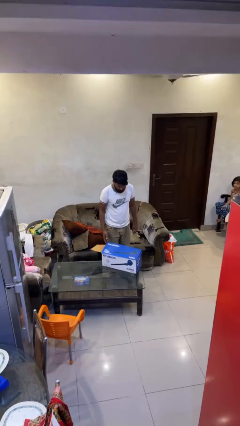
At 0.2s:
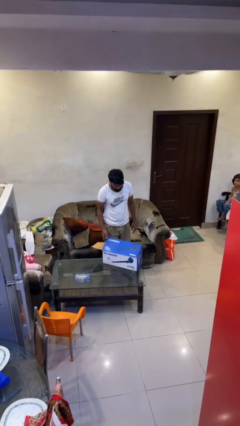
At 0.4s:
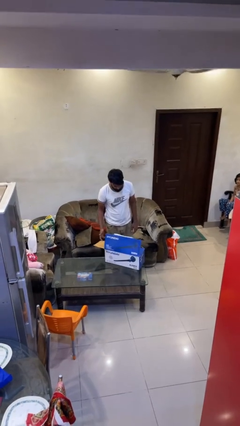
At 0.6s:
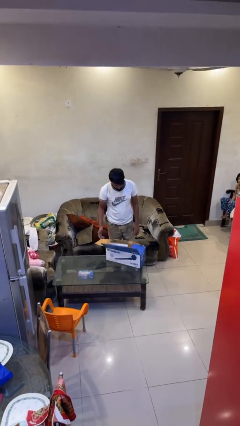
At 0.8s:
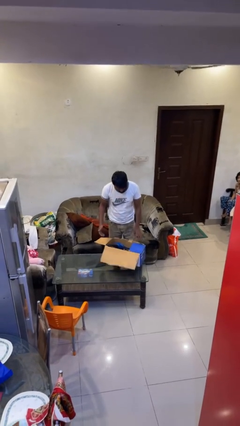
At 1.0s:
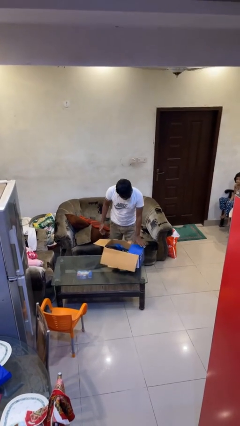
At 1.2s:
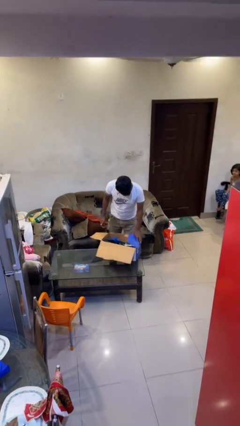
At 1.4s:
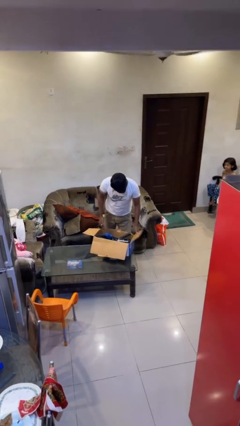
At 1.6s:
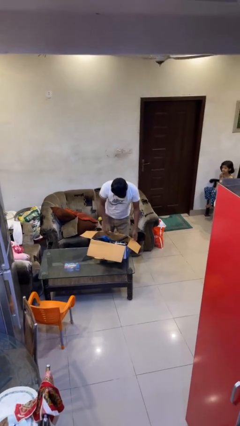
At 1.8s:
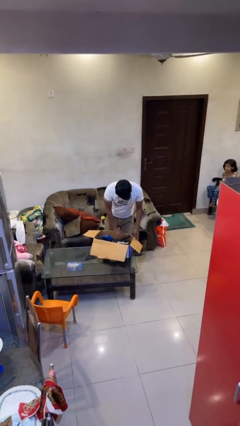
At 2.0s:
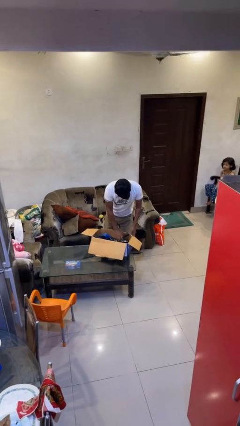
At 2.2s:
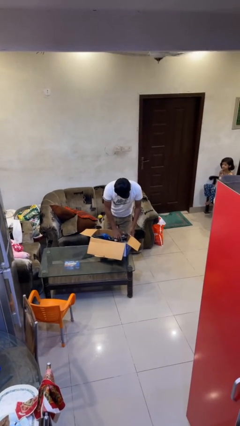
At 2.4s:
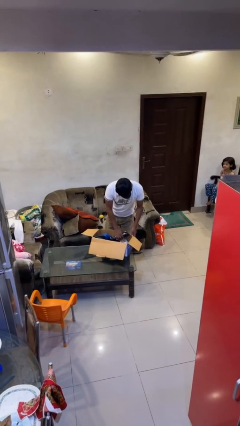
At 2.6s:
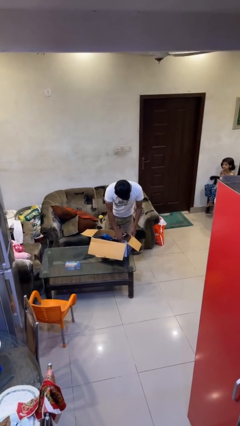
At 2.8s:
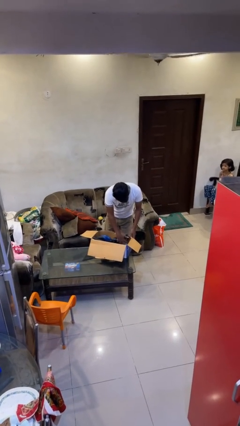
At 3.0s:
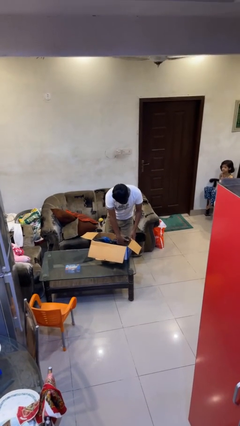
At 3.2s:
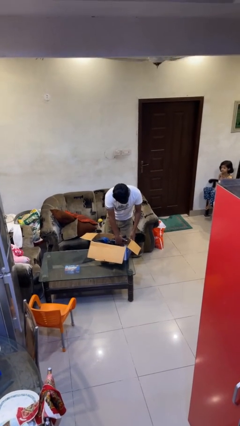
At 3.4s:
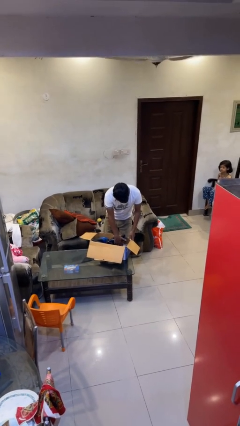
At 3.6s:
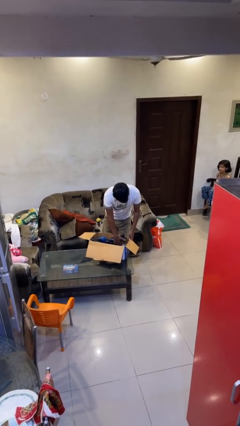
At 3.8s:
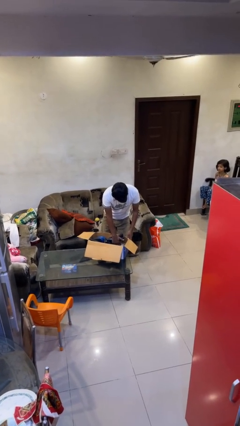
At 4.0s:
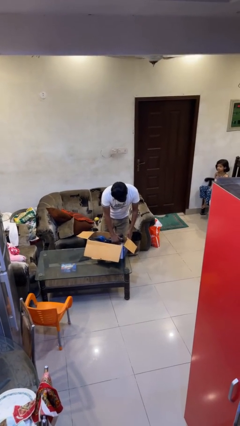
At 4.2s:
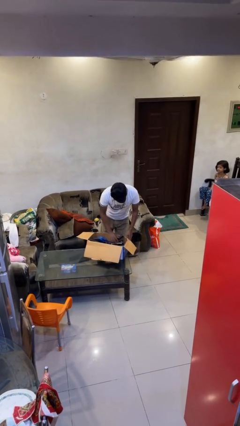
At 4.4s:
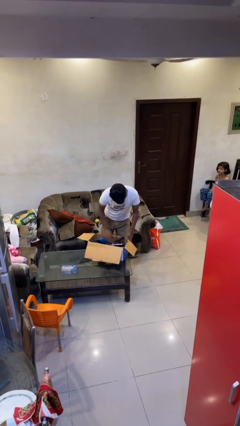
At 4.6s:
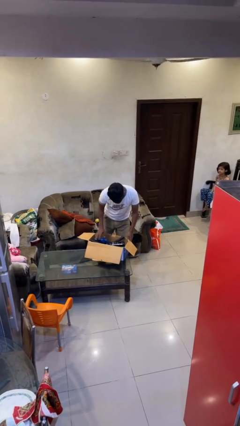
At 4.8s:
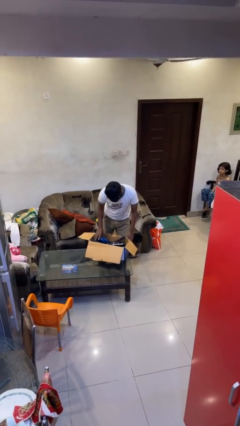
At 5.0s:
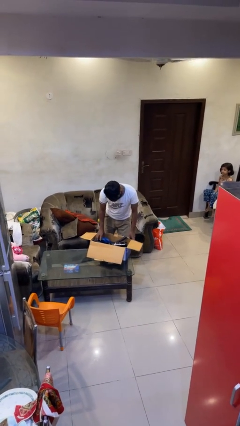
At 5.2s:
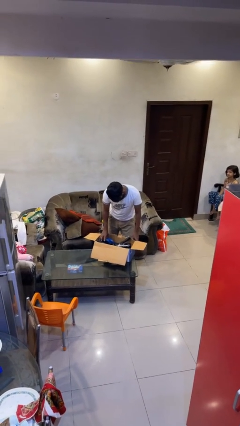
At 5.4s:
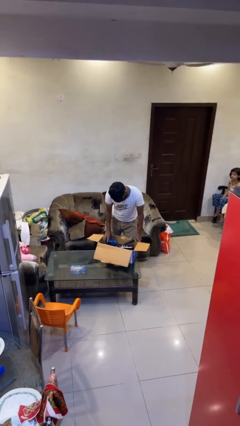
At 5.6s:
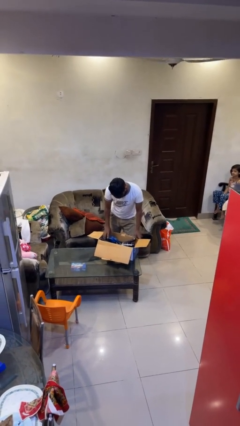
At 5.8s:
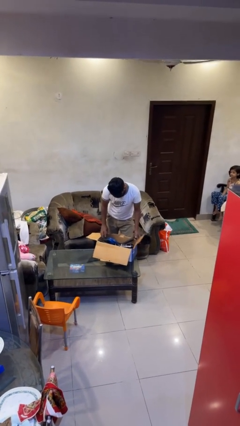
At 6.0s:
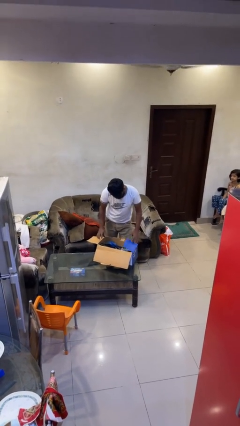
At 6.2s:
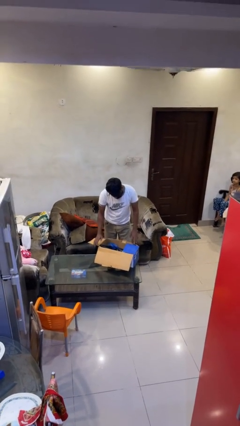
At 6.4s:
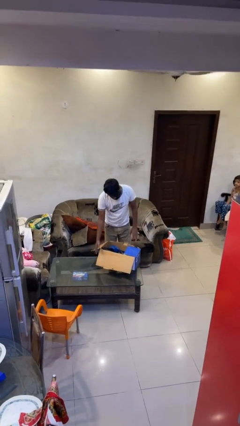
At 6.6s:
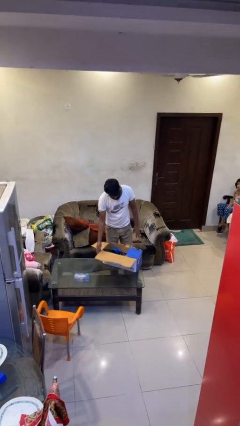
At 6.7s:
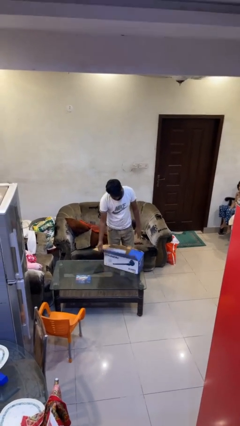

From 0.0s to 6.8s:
person searches in box

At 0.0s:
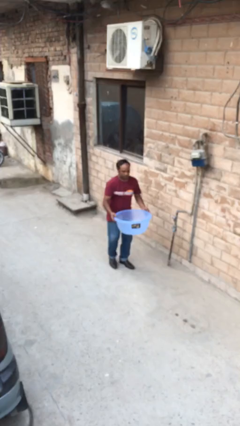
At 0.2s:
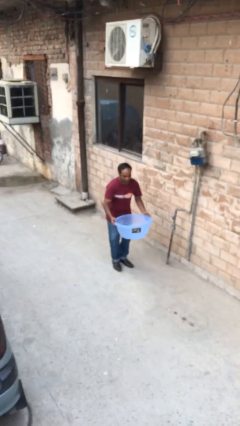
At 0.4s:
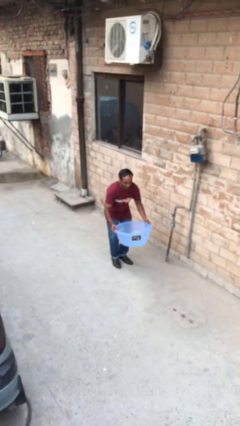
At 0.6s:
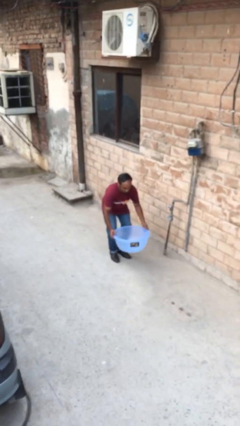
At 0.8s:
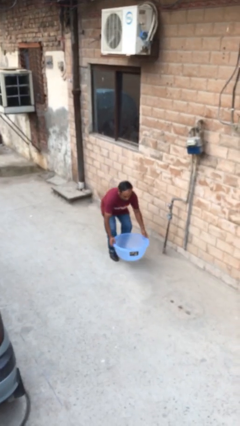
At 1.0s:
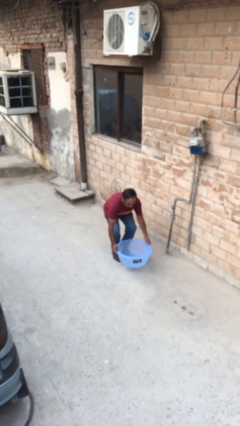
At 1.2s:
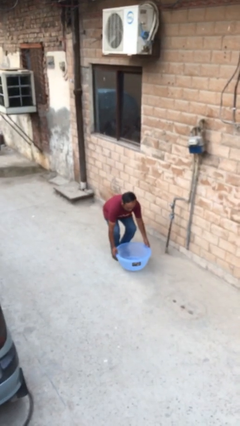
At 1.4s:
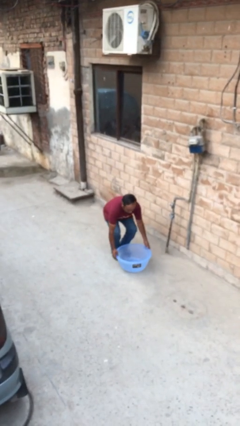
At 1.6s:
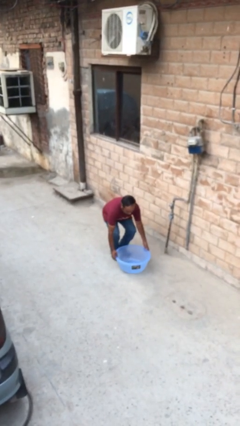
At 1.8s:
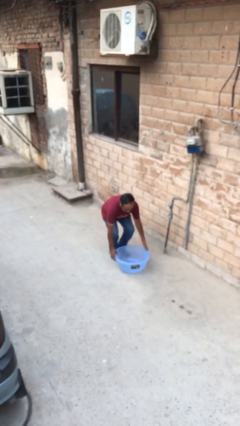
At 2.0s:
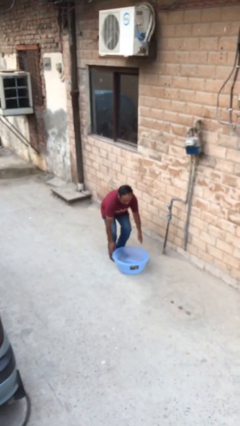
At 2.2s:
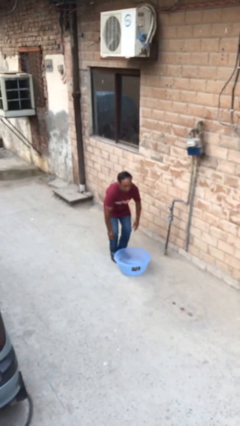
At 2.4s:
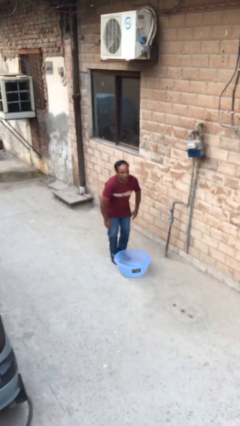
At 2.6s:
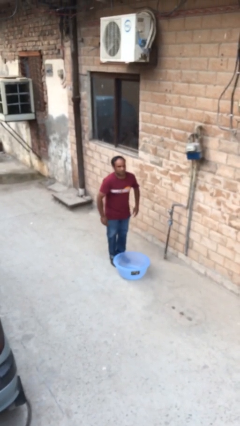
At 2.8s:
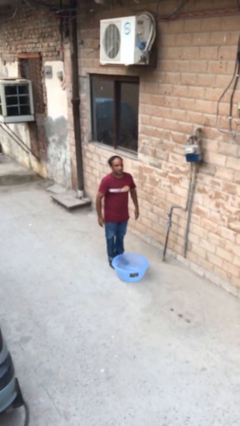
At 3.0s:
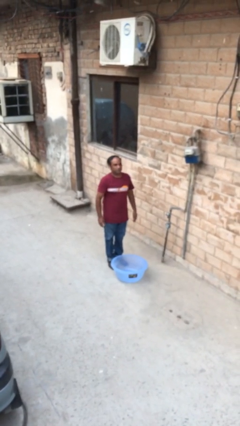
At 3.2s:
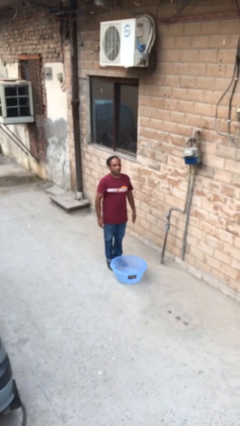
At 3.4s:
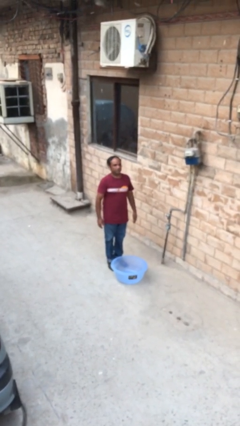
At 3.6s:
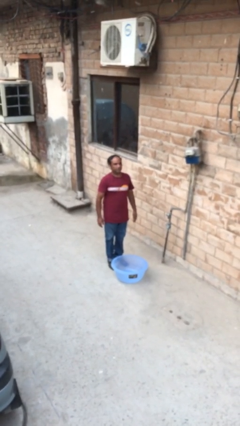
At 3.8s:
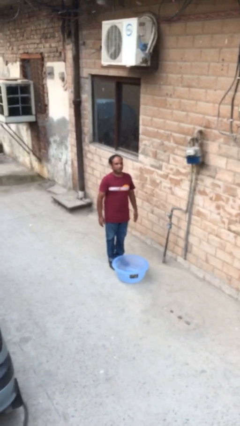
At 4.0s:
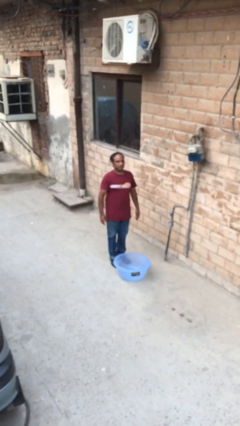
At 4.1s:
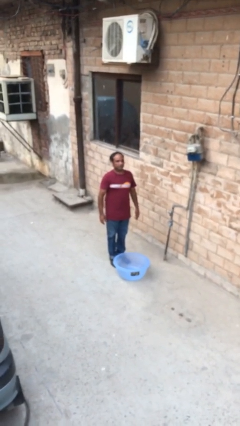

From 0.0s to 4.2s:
person puts down object on floor

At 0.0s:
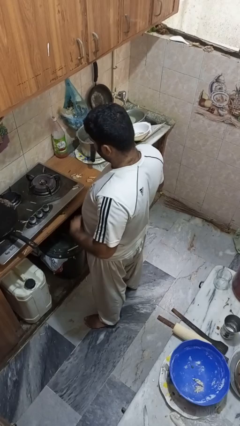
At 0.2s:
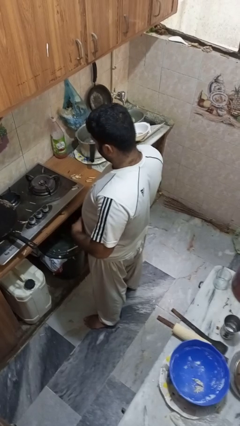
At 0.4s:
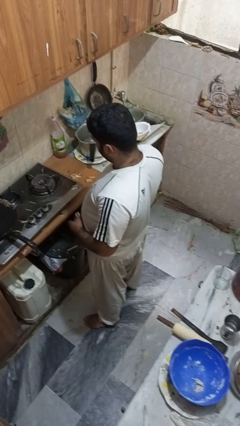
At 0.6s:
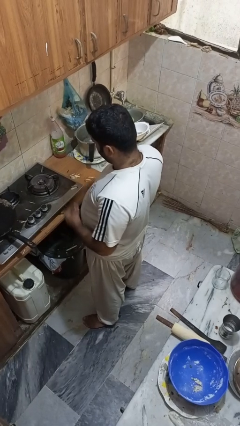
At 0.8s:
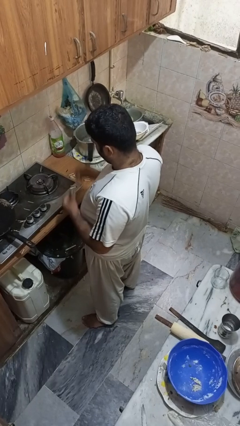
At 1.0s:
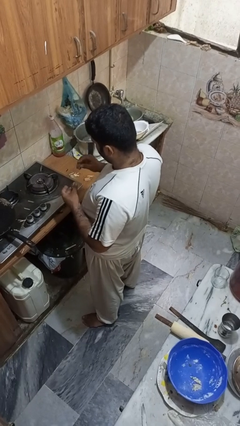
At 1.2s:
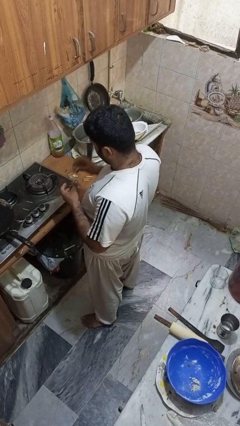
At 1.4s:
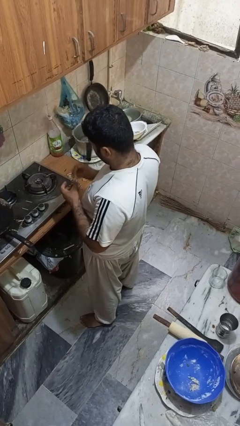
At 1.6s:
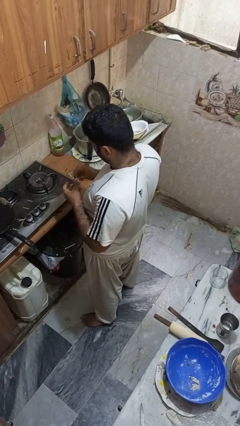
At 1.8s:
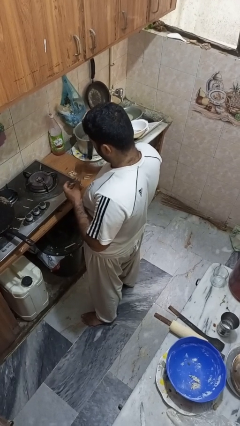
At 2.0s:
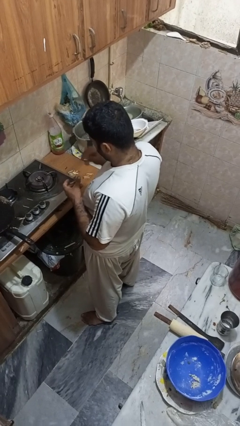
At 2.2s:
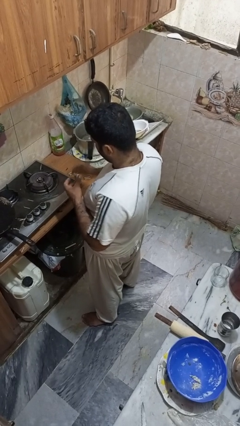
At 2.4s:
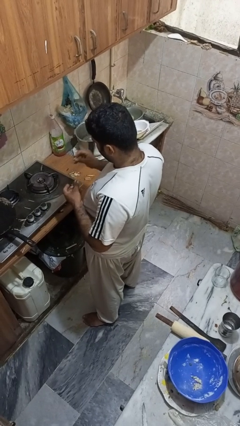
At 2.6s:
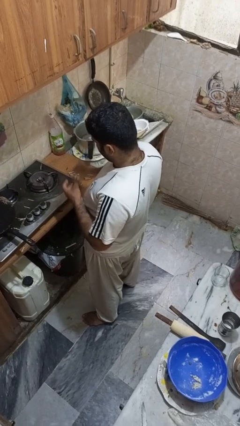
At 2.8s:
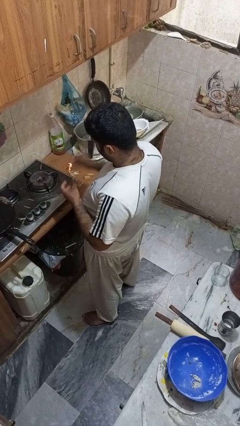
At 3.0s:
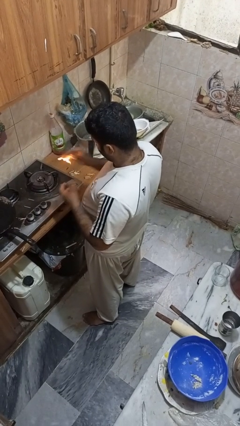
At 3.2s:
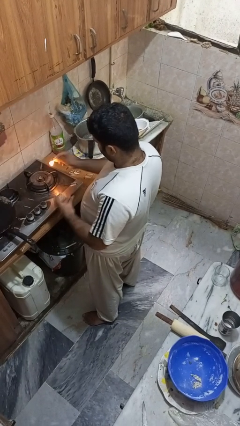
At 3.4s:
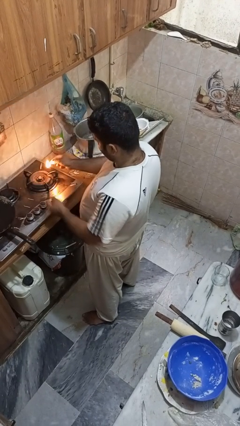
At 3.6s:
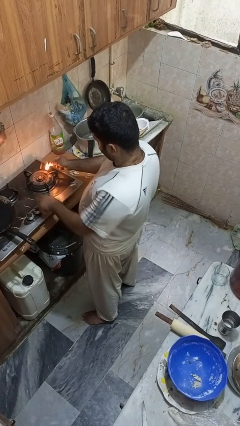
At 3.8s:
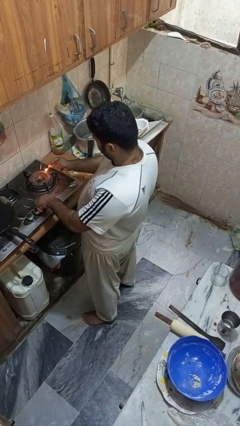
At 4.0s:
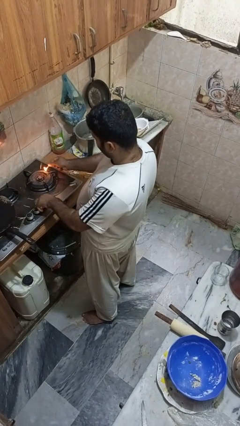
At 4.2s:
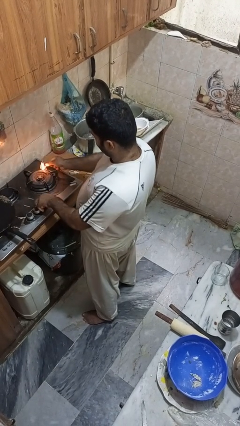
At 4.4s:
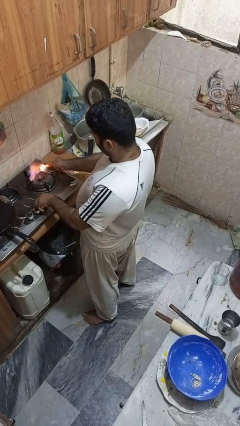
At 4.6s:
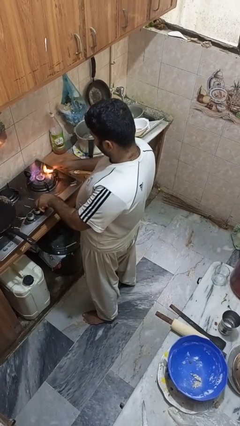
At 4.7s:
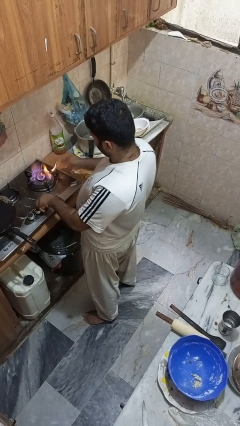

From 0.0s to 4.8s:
person turns on stovetop

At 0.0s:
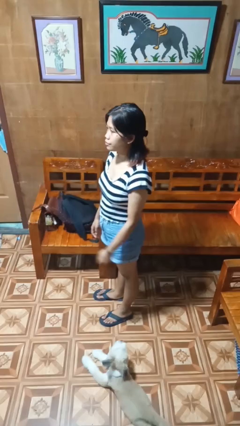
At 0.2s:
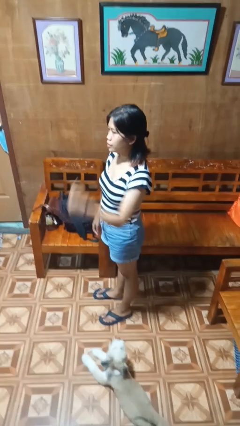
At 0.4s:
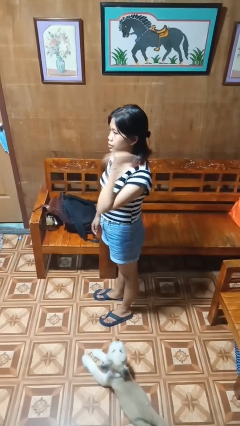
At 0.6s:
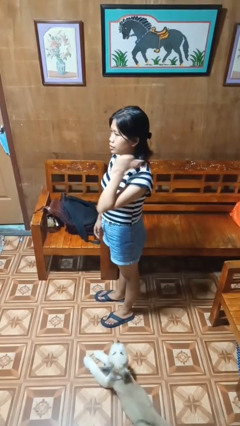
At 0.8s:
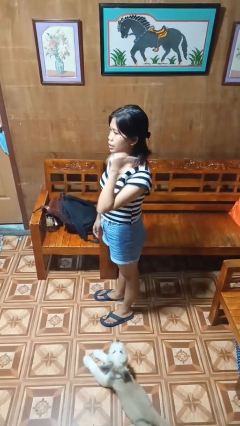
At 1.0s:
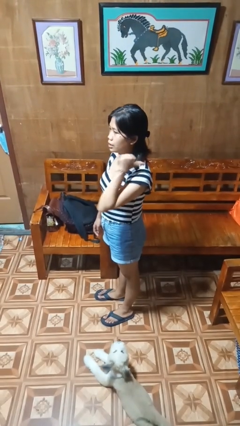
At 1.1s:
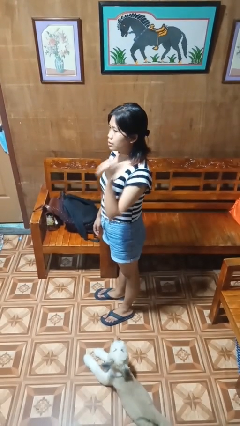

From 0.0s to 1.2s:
person gestures behind me

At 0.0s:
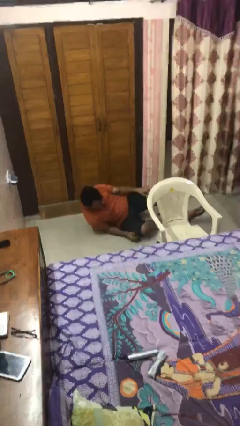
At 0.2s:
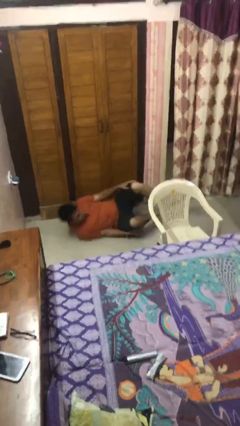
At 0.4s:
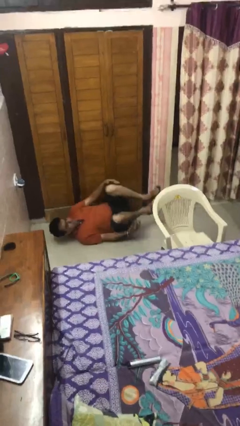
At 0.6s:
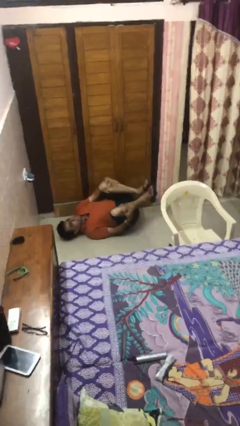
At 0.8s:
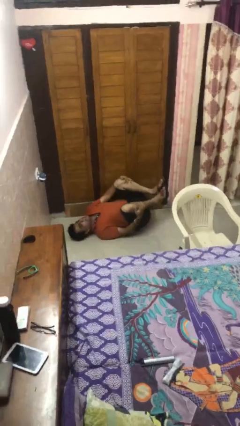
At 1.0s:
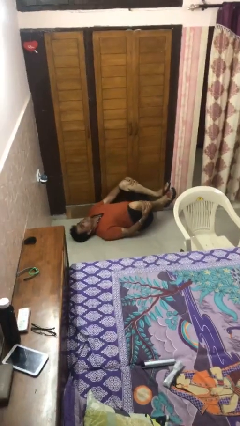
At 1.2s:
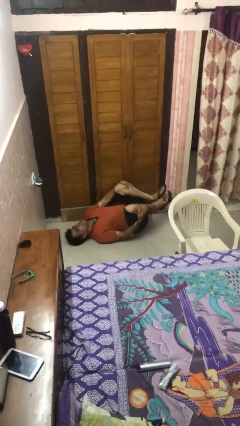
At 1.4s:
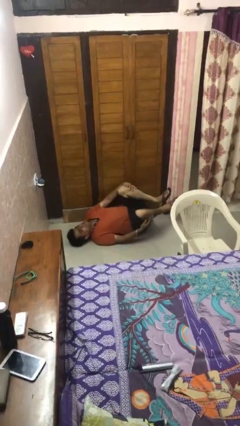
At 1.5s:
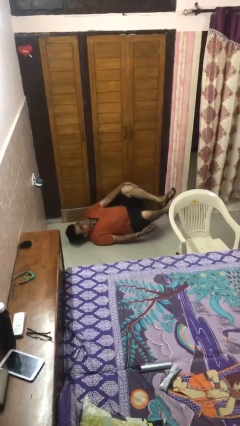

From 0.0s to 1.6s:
person lies down on floor
